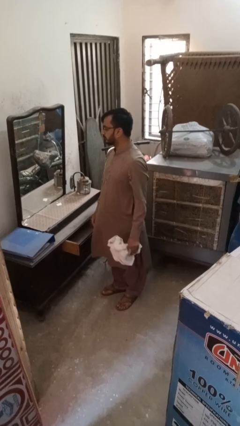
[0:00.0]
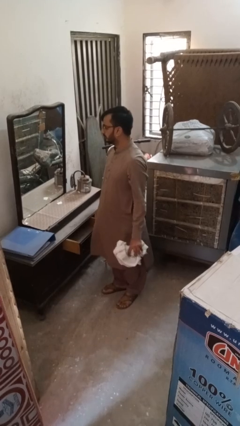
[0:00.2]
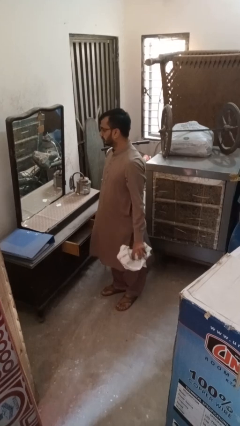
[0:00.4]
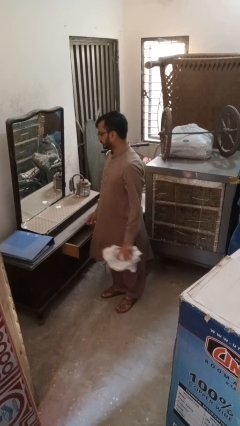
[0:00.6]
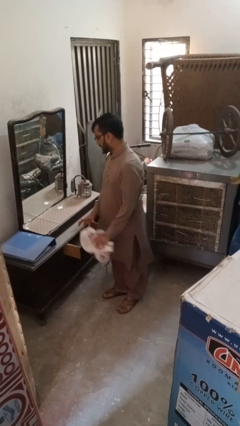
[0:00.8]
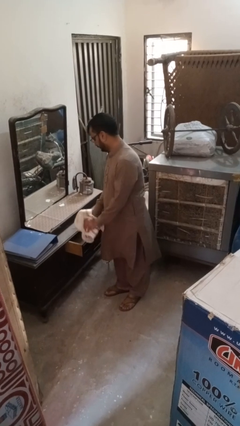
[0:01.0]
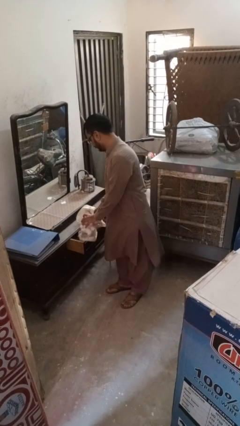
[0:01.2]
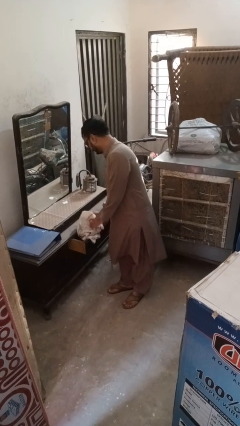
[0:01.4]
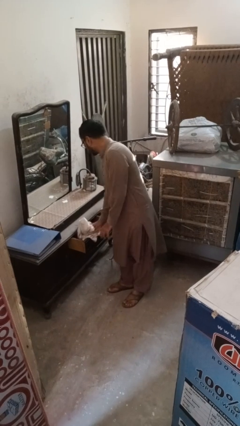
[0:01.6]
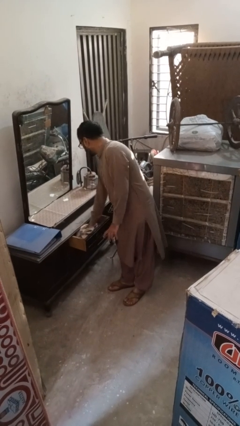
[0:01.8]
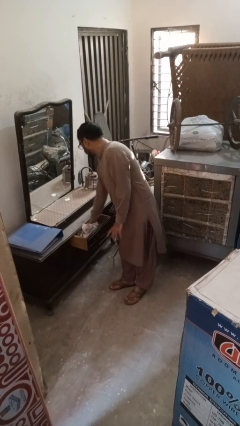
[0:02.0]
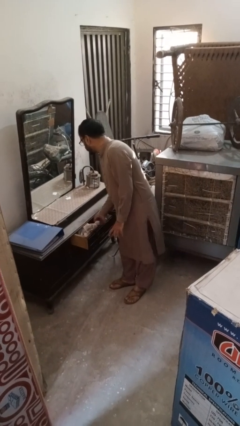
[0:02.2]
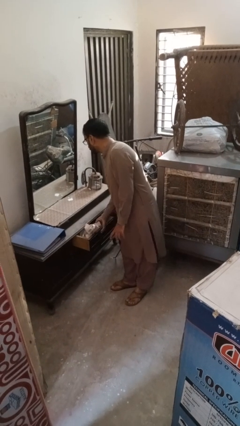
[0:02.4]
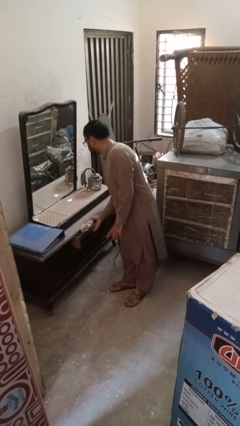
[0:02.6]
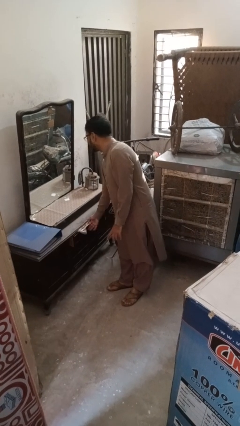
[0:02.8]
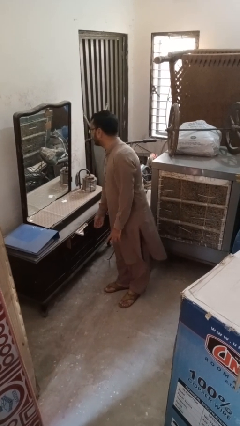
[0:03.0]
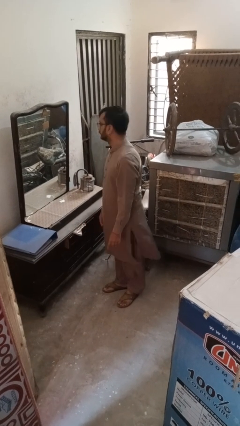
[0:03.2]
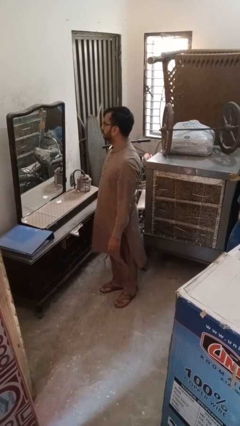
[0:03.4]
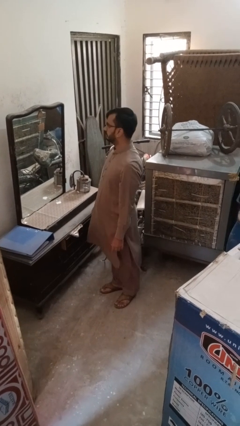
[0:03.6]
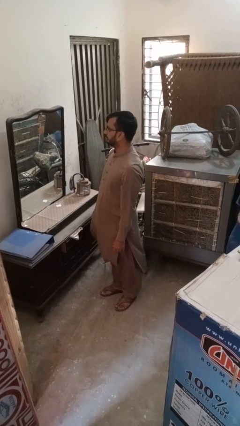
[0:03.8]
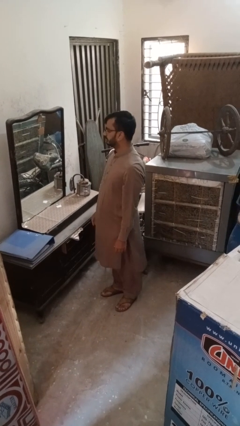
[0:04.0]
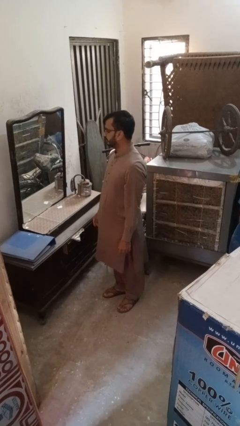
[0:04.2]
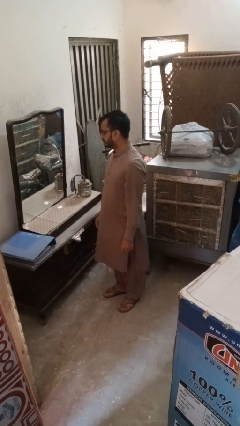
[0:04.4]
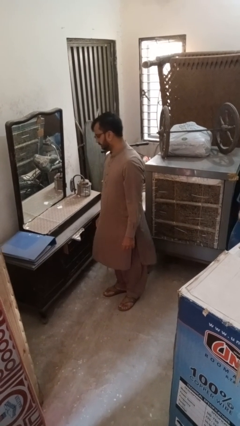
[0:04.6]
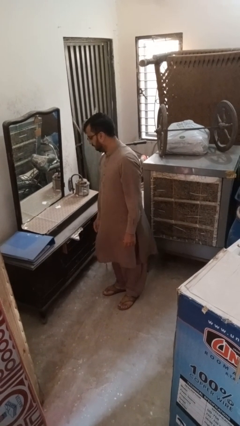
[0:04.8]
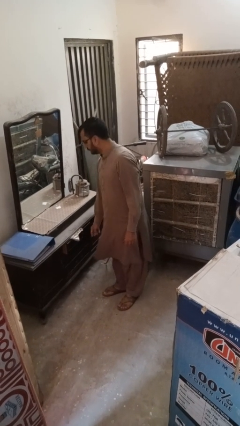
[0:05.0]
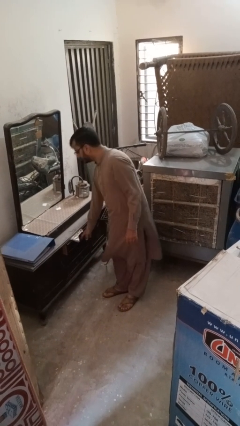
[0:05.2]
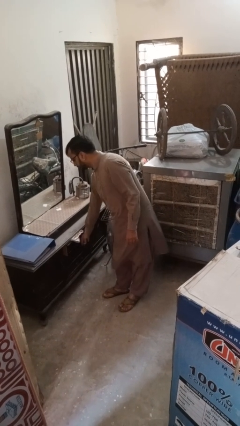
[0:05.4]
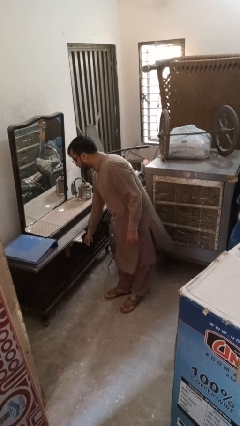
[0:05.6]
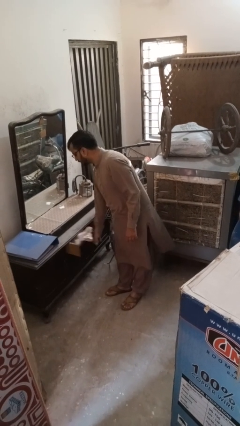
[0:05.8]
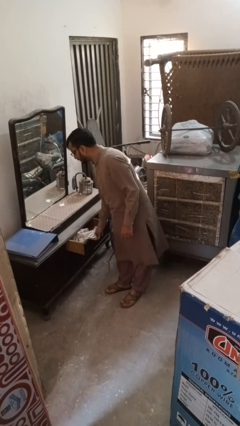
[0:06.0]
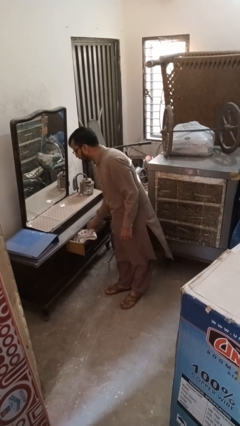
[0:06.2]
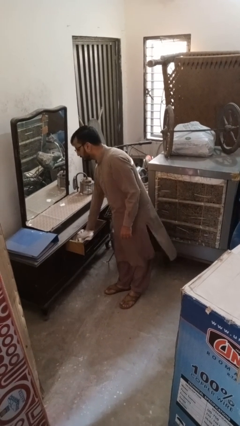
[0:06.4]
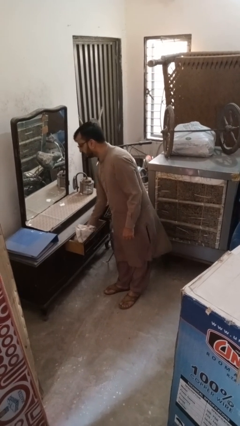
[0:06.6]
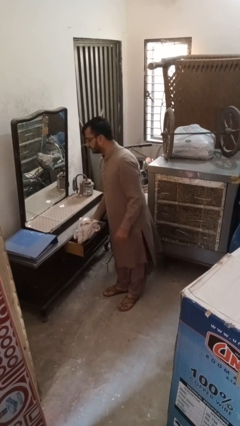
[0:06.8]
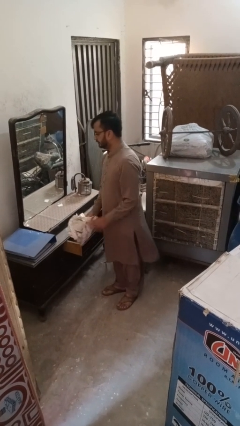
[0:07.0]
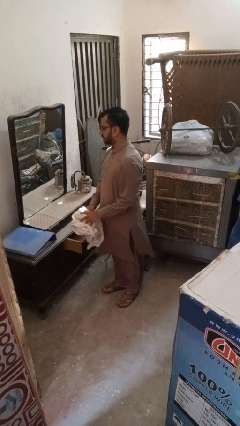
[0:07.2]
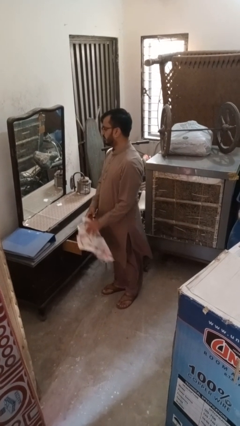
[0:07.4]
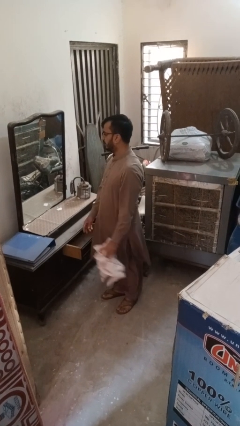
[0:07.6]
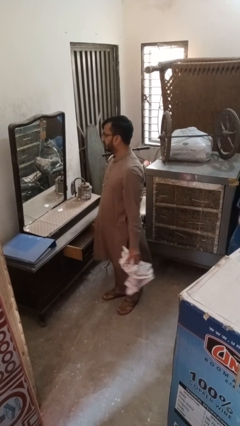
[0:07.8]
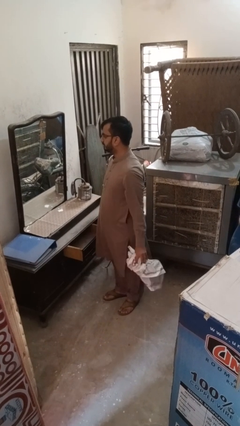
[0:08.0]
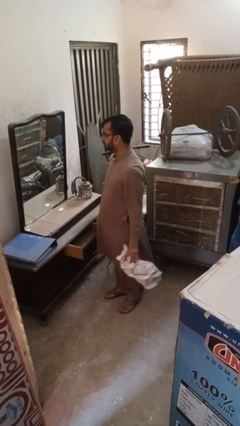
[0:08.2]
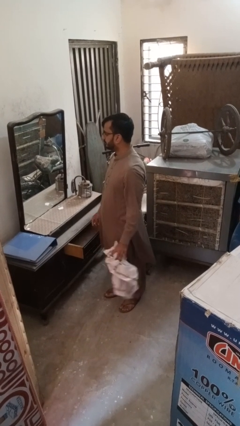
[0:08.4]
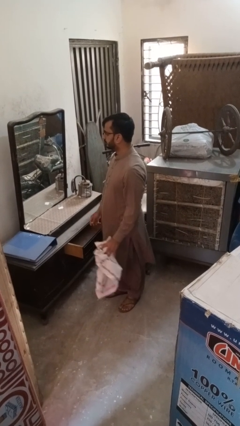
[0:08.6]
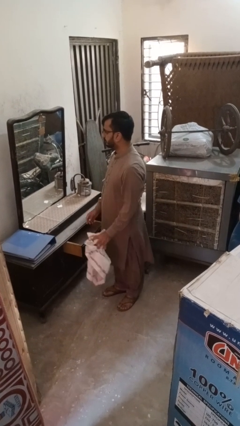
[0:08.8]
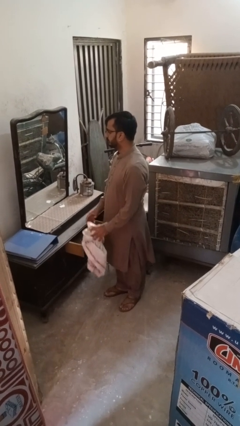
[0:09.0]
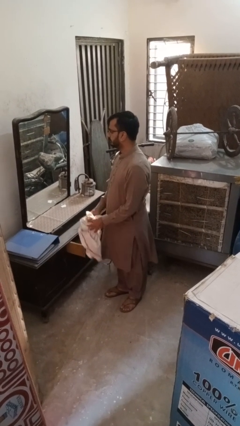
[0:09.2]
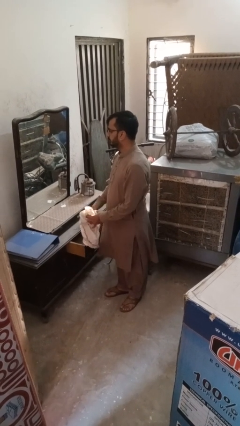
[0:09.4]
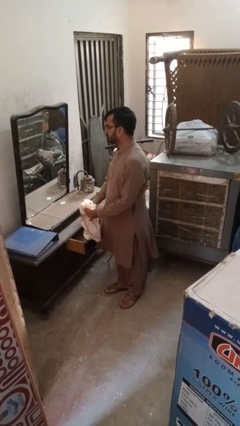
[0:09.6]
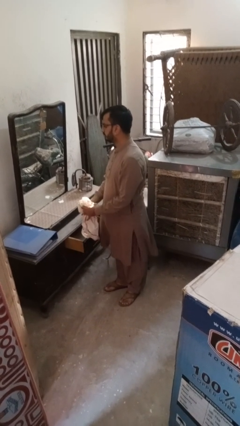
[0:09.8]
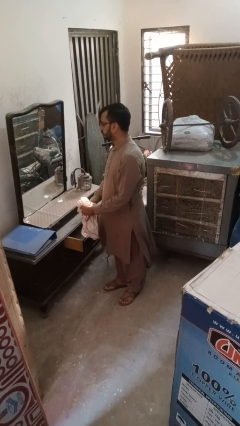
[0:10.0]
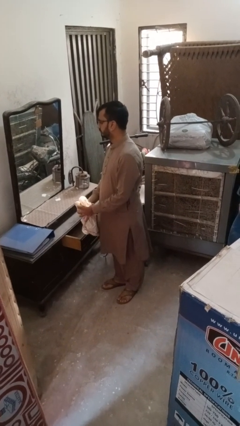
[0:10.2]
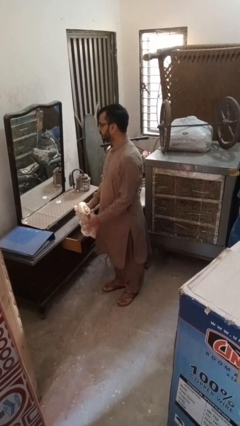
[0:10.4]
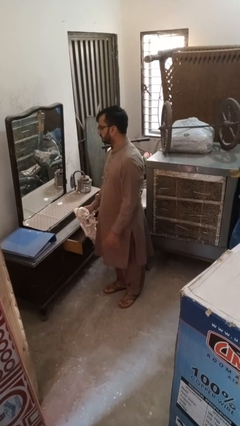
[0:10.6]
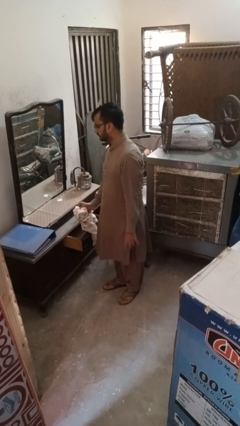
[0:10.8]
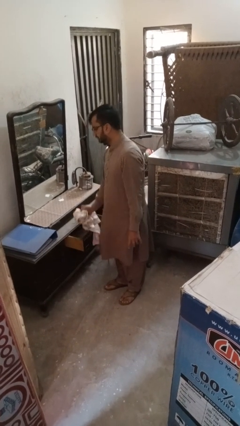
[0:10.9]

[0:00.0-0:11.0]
person puts clothes into dresser

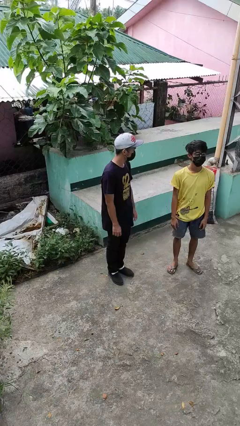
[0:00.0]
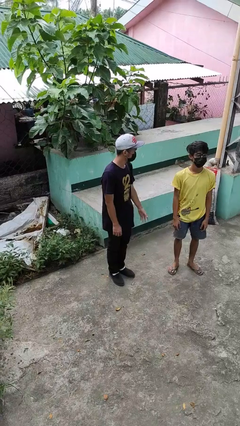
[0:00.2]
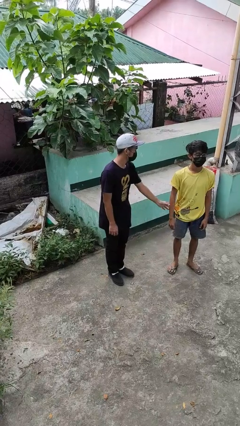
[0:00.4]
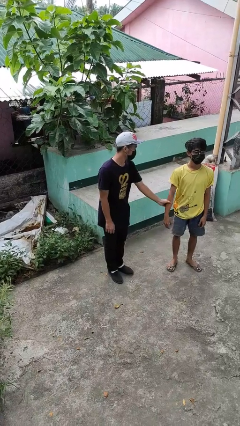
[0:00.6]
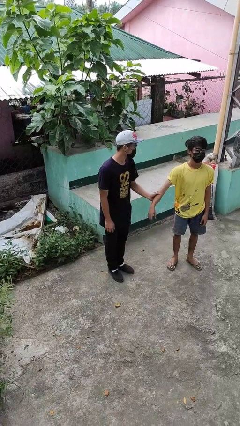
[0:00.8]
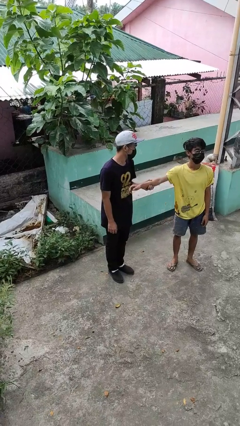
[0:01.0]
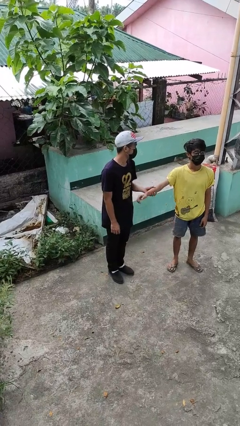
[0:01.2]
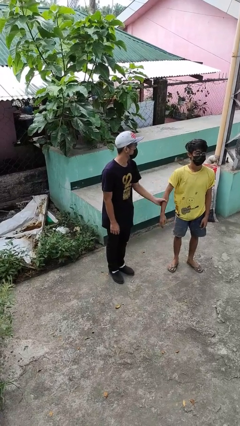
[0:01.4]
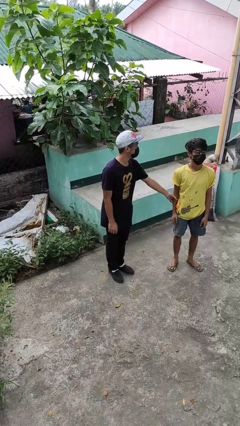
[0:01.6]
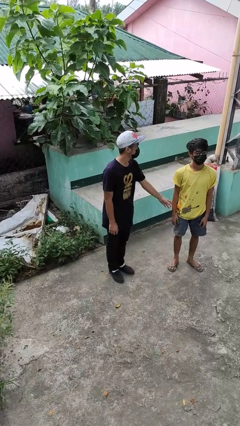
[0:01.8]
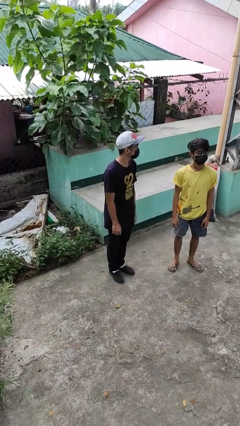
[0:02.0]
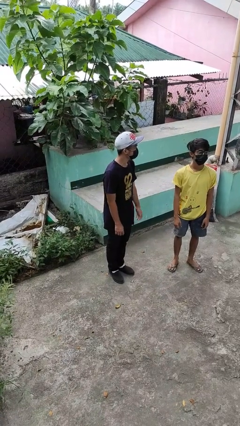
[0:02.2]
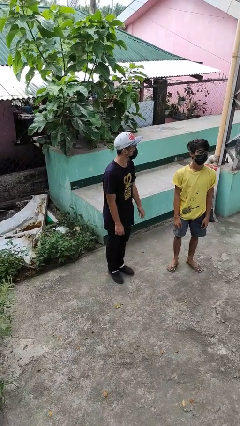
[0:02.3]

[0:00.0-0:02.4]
person grabs person by forearm

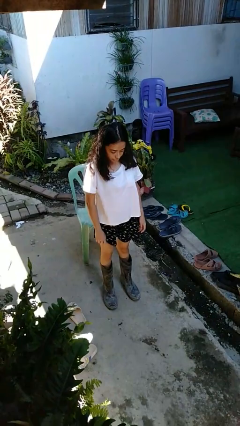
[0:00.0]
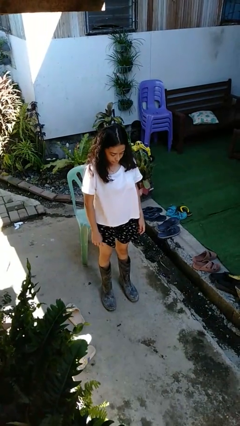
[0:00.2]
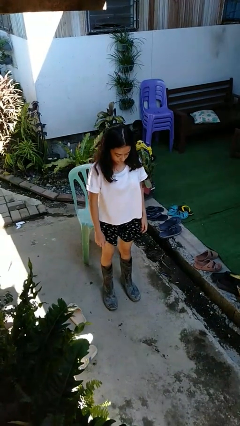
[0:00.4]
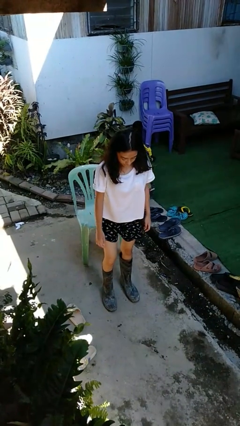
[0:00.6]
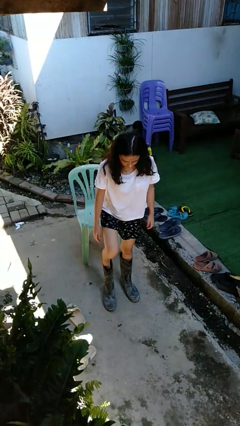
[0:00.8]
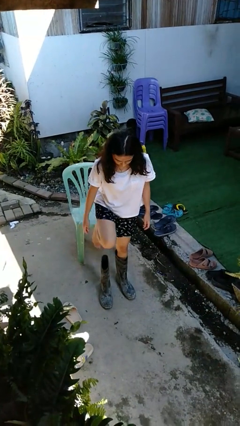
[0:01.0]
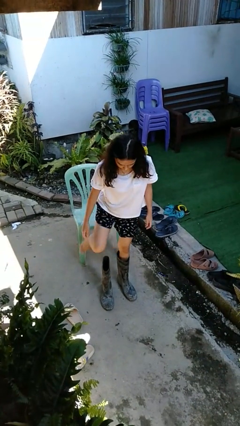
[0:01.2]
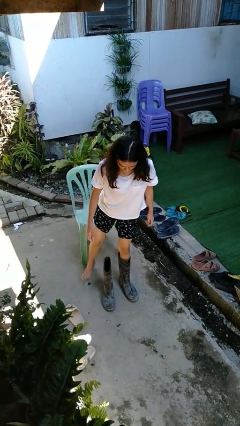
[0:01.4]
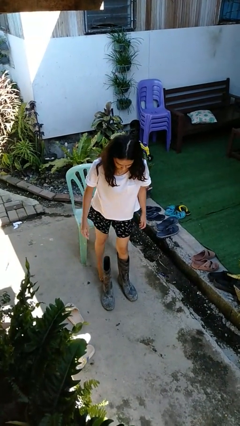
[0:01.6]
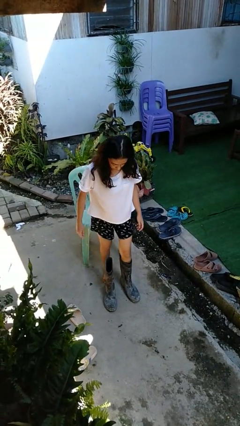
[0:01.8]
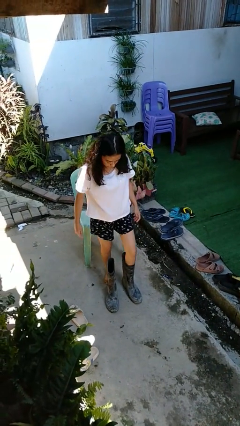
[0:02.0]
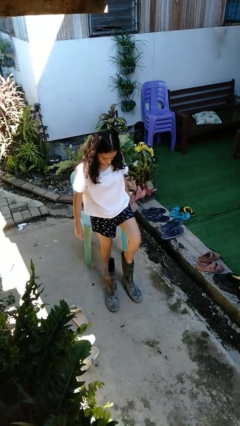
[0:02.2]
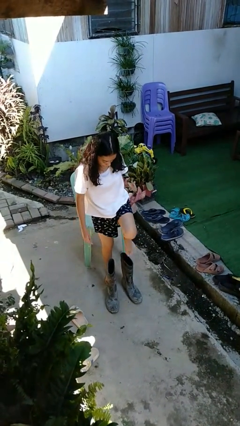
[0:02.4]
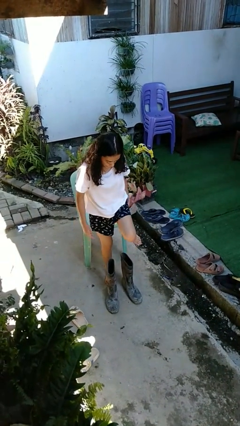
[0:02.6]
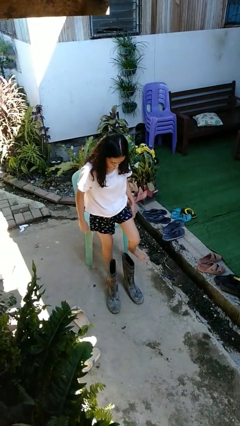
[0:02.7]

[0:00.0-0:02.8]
person takes off boots

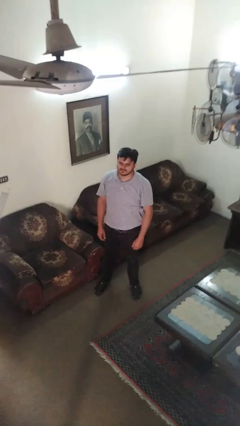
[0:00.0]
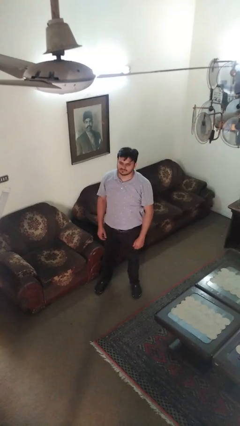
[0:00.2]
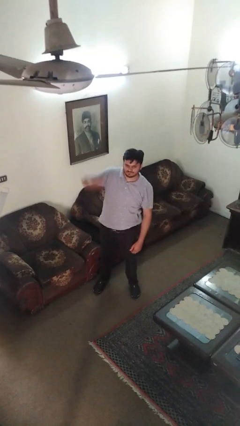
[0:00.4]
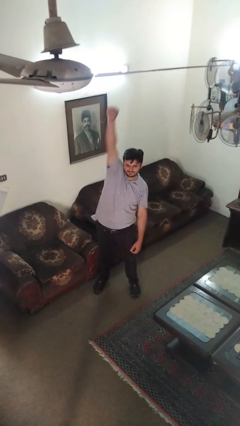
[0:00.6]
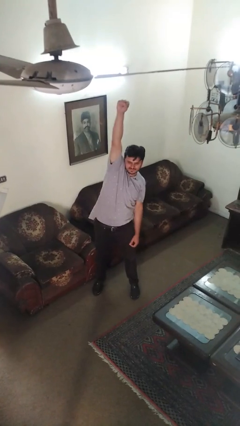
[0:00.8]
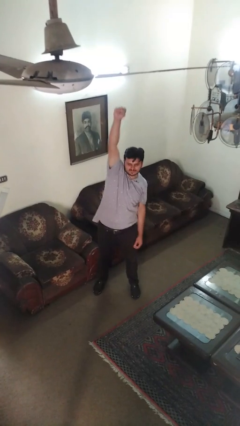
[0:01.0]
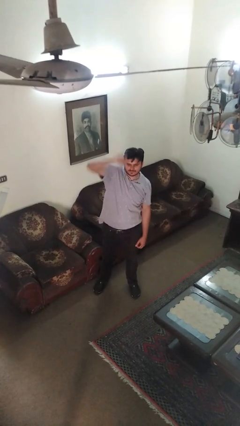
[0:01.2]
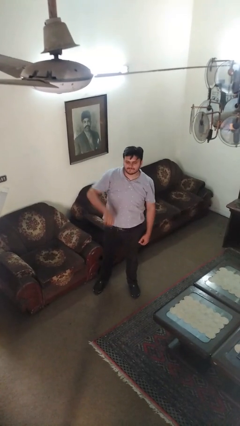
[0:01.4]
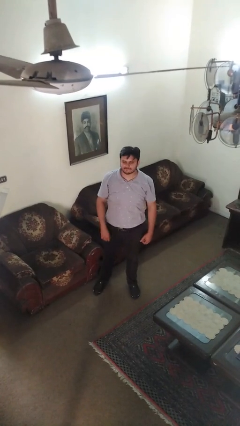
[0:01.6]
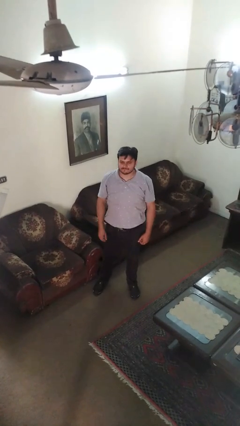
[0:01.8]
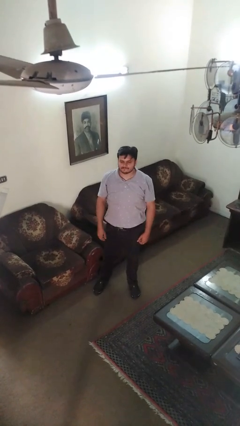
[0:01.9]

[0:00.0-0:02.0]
person punches
